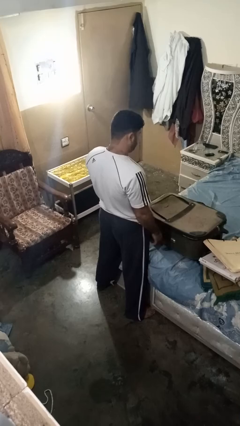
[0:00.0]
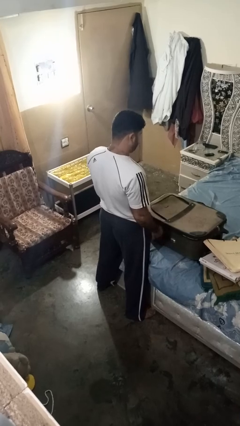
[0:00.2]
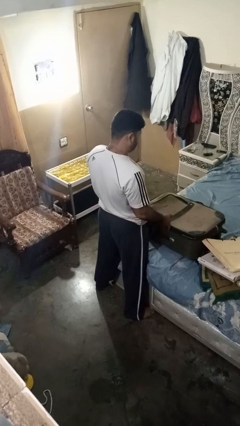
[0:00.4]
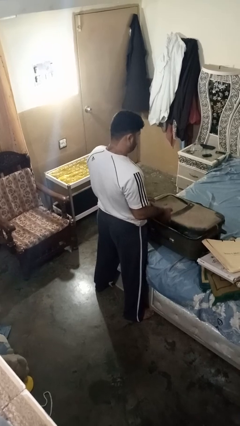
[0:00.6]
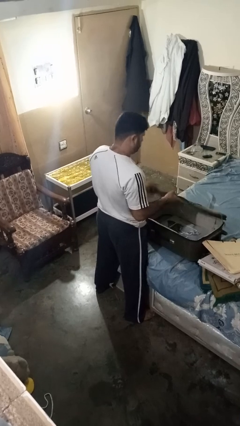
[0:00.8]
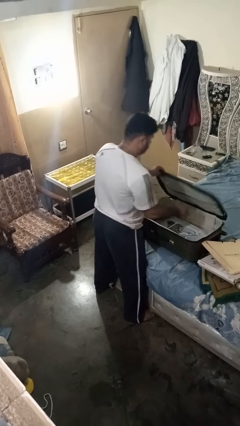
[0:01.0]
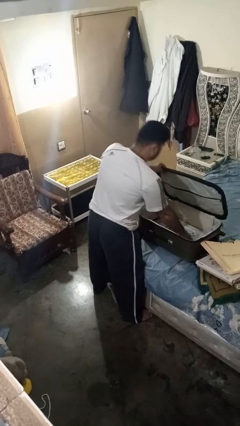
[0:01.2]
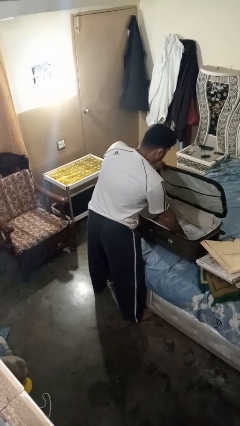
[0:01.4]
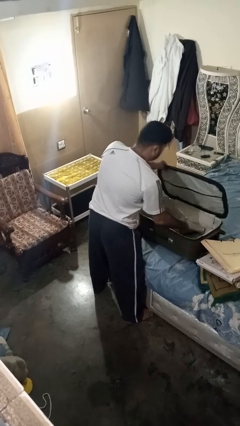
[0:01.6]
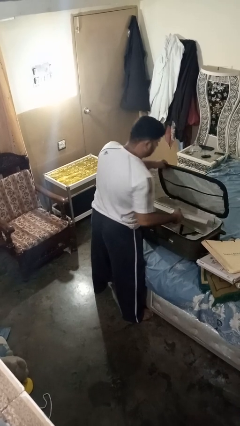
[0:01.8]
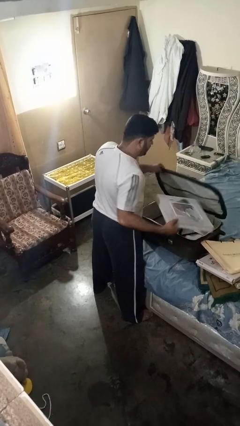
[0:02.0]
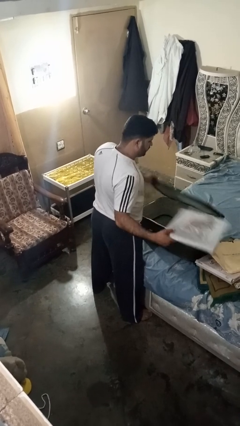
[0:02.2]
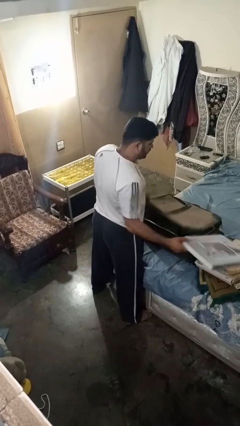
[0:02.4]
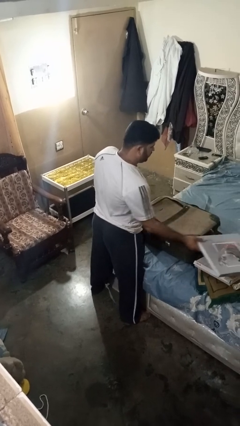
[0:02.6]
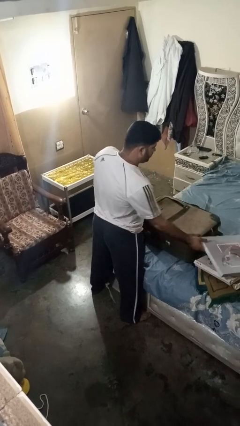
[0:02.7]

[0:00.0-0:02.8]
person unloads clothes from suitcase

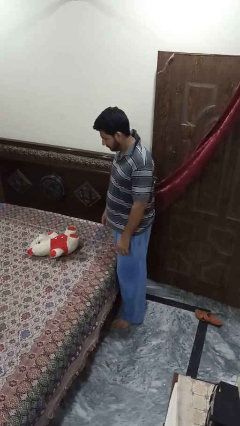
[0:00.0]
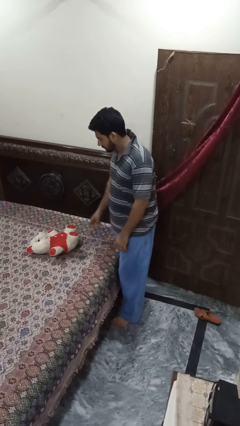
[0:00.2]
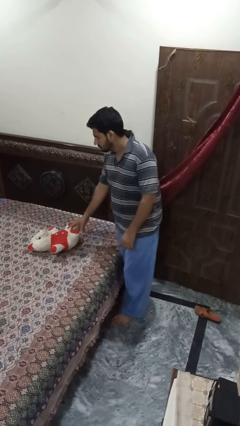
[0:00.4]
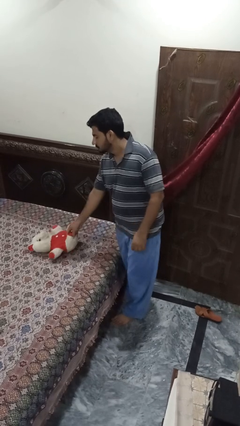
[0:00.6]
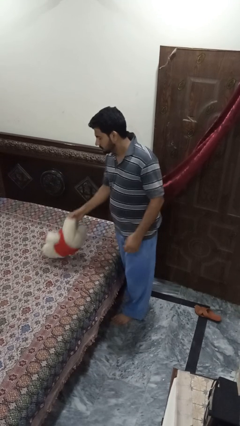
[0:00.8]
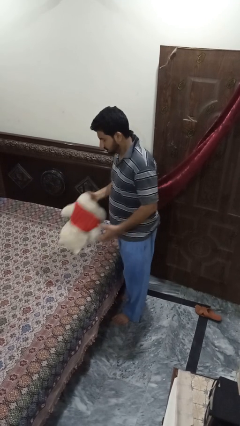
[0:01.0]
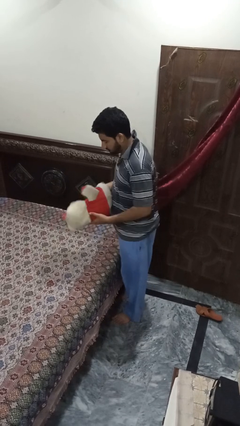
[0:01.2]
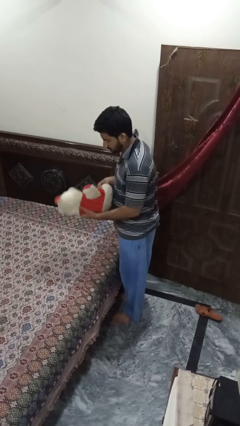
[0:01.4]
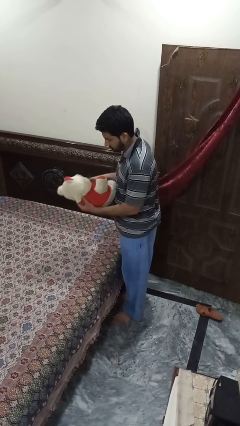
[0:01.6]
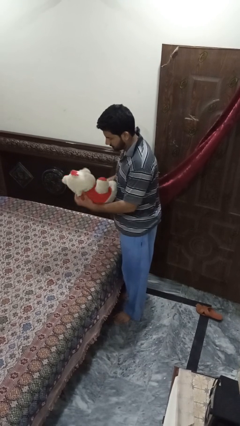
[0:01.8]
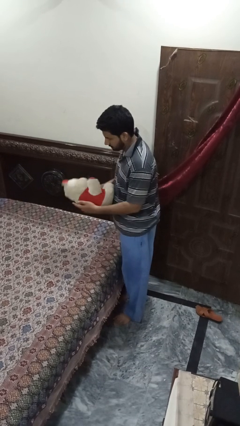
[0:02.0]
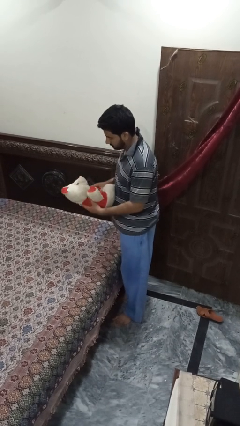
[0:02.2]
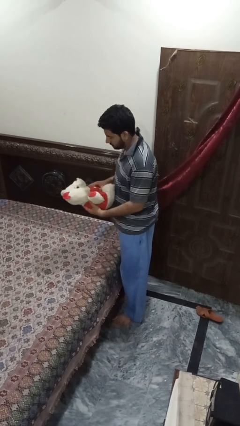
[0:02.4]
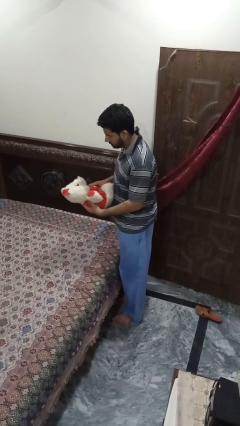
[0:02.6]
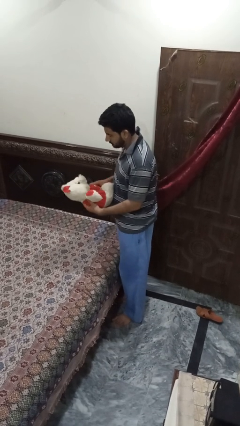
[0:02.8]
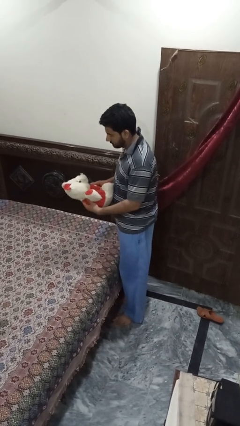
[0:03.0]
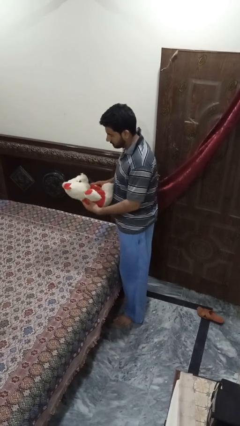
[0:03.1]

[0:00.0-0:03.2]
person picks up object from bed

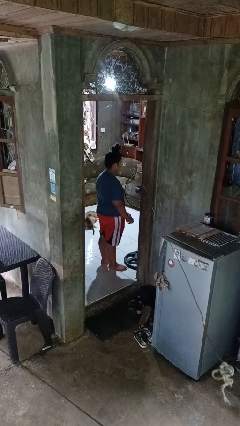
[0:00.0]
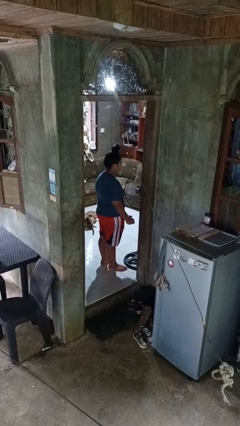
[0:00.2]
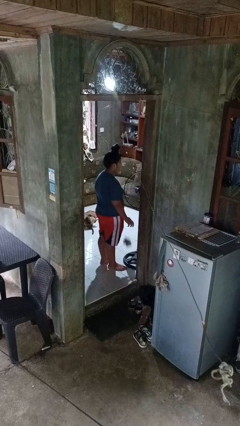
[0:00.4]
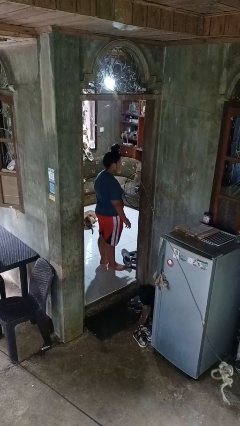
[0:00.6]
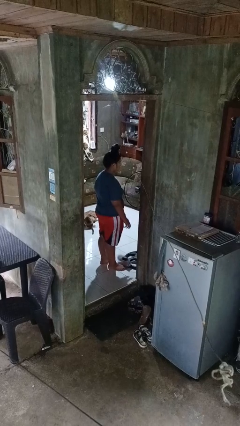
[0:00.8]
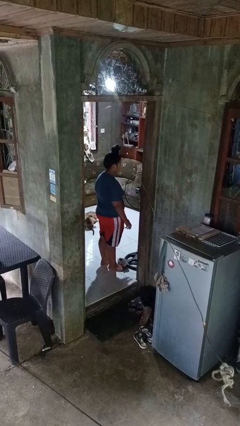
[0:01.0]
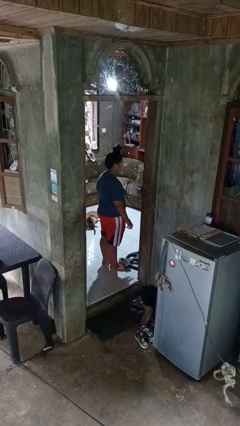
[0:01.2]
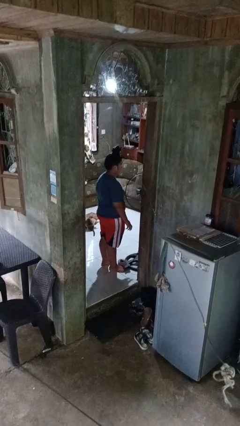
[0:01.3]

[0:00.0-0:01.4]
person drops object

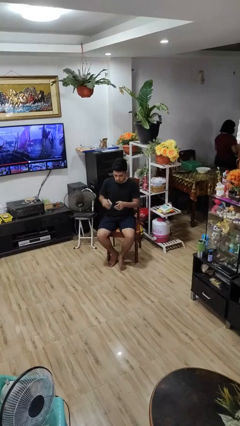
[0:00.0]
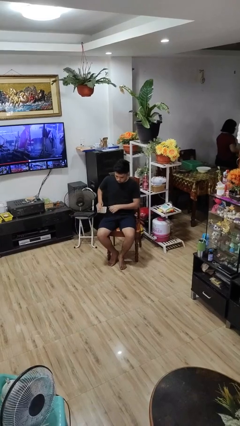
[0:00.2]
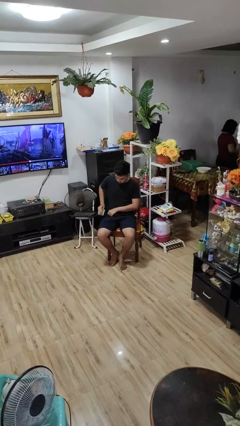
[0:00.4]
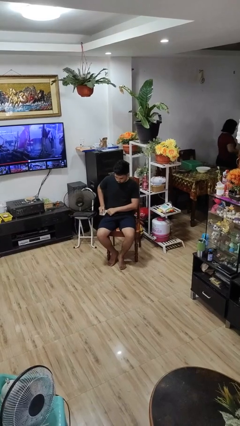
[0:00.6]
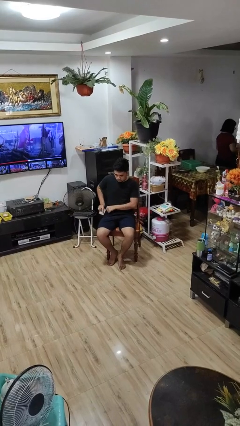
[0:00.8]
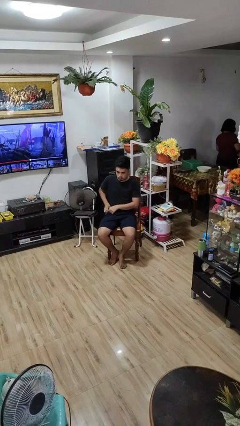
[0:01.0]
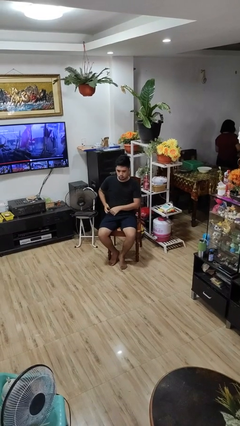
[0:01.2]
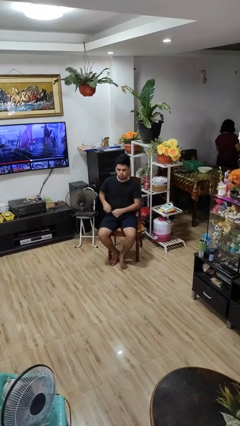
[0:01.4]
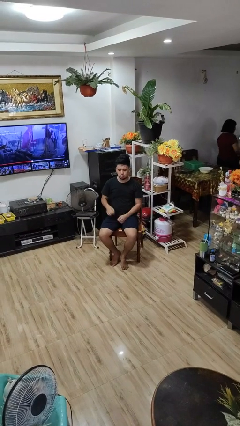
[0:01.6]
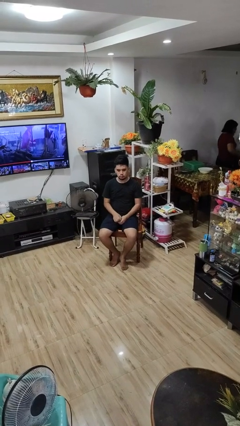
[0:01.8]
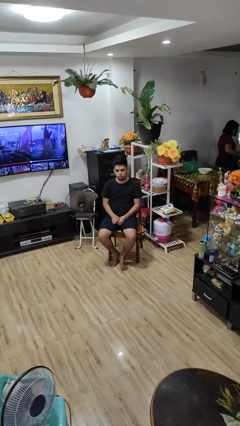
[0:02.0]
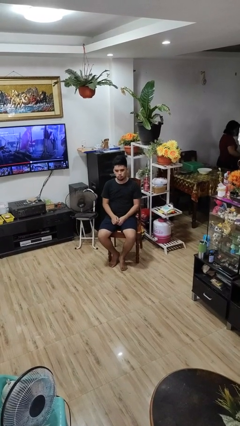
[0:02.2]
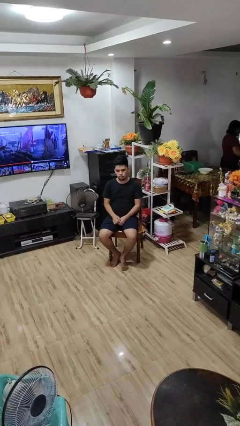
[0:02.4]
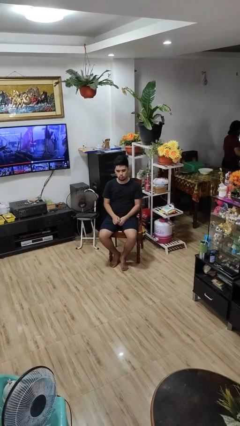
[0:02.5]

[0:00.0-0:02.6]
person puts phone into pocket

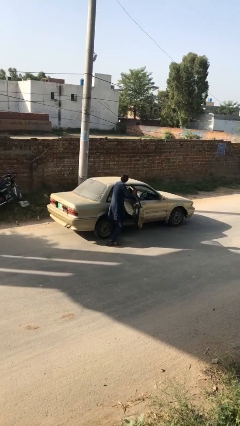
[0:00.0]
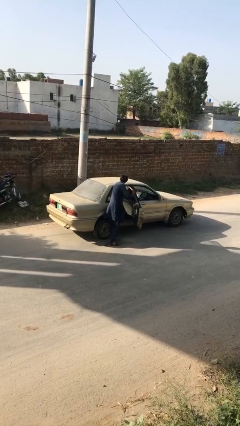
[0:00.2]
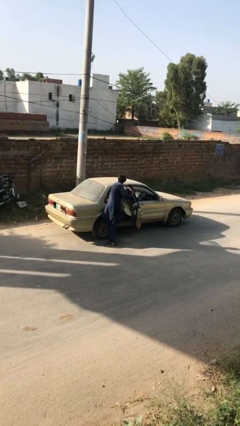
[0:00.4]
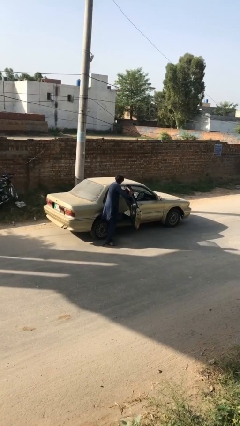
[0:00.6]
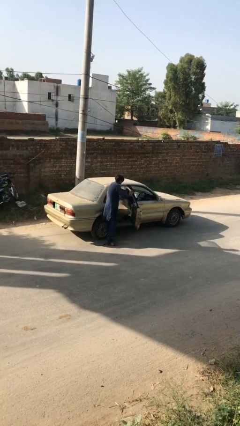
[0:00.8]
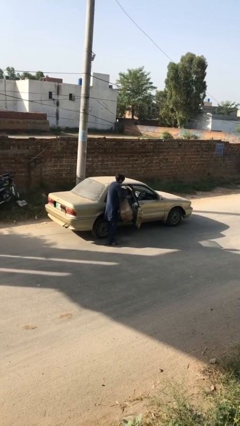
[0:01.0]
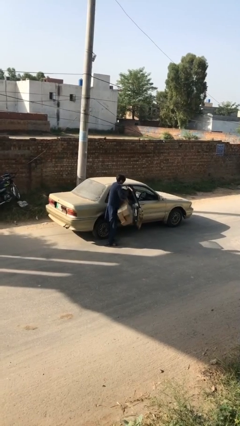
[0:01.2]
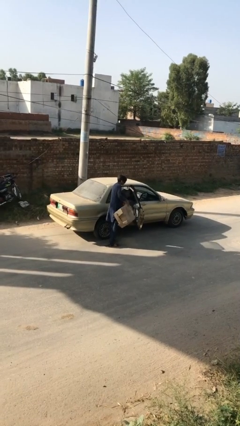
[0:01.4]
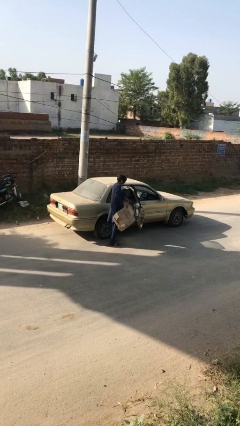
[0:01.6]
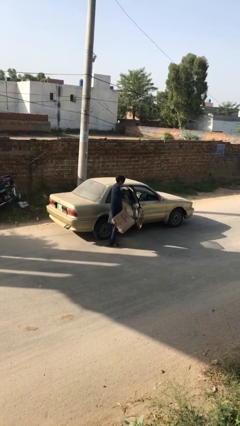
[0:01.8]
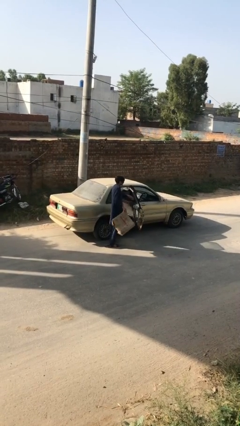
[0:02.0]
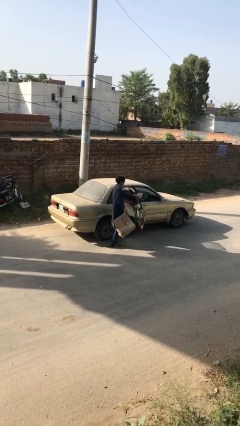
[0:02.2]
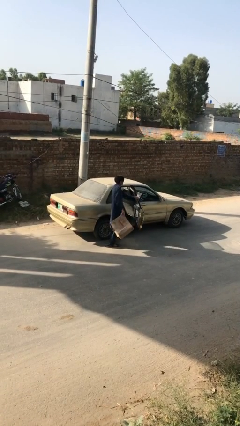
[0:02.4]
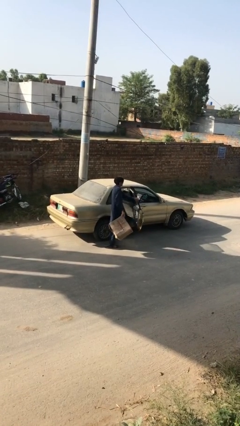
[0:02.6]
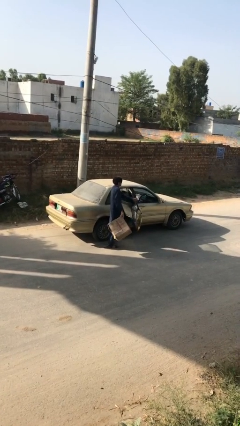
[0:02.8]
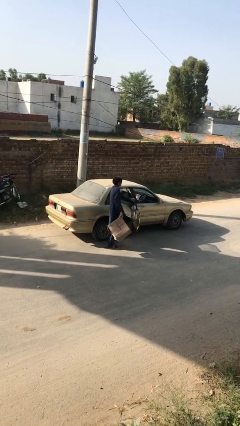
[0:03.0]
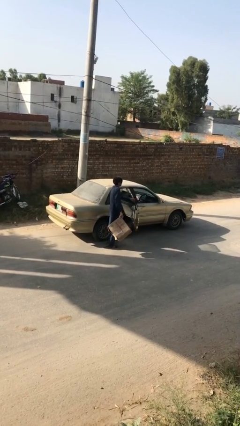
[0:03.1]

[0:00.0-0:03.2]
person unloads car

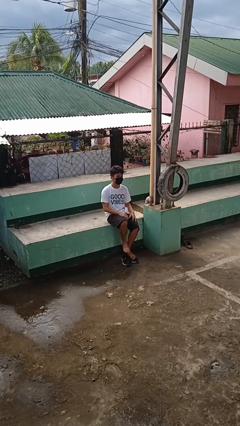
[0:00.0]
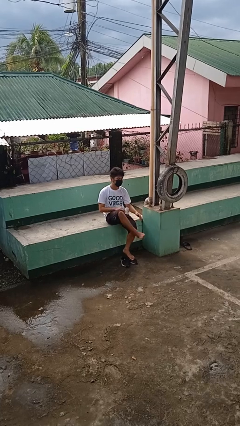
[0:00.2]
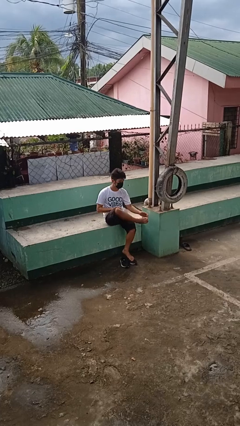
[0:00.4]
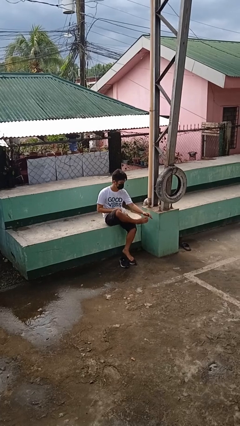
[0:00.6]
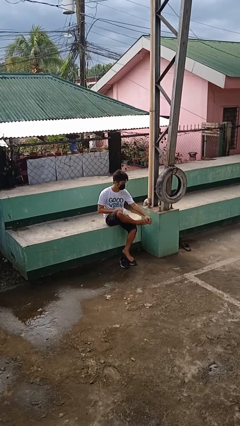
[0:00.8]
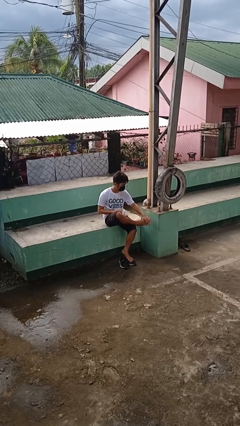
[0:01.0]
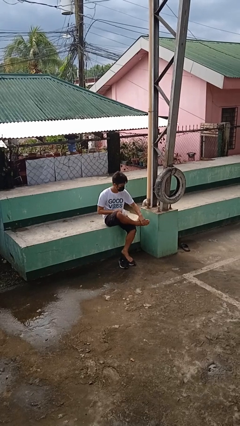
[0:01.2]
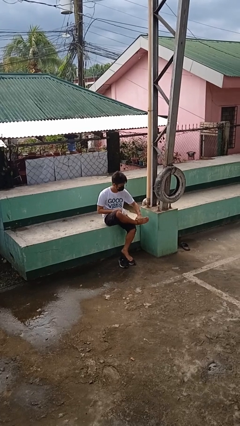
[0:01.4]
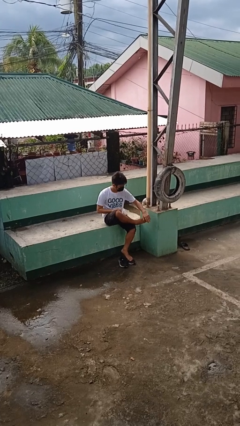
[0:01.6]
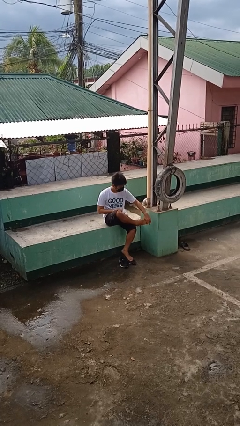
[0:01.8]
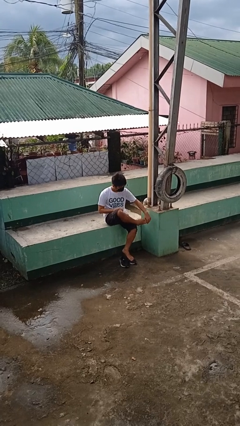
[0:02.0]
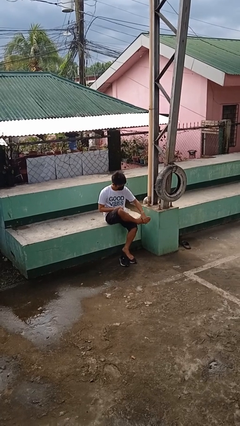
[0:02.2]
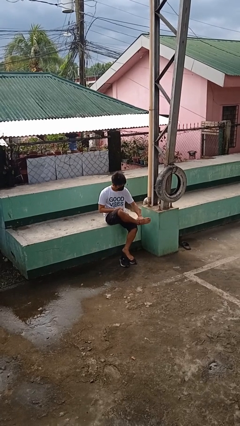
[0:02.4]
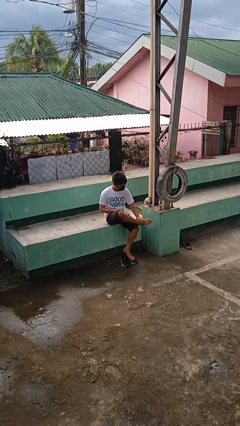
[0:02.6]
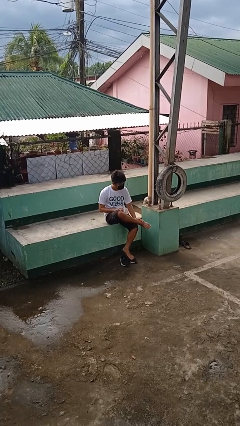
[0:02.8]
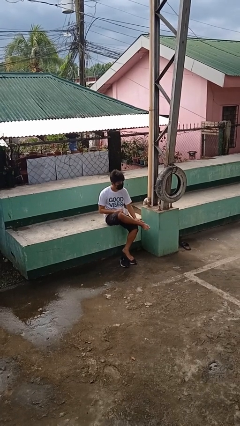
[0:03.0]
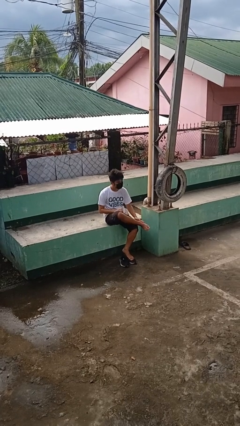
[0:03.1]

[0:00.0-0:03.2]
person rubs foot

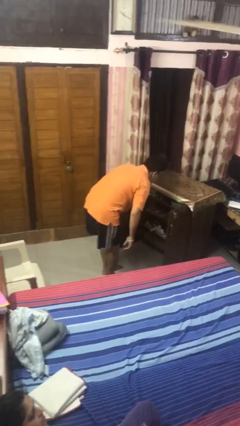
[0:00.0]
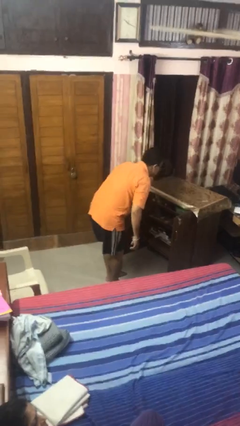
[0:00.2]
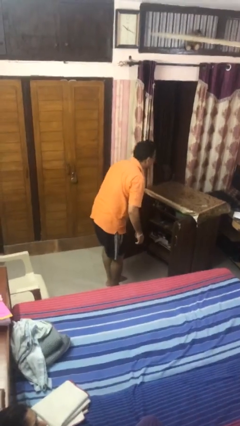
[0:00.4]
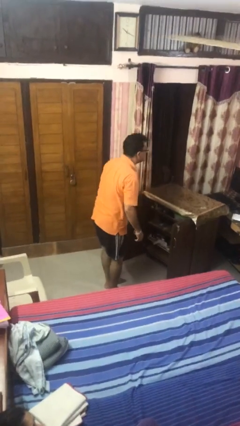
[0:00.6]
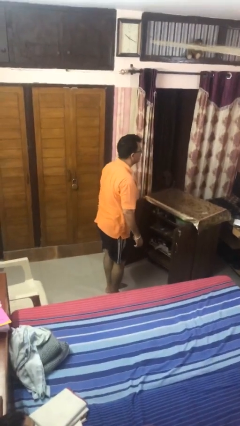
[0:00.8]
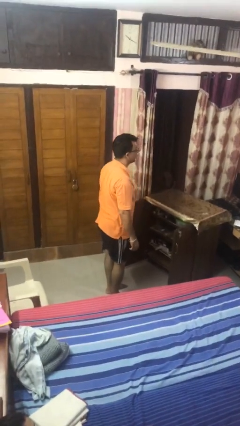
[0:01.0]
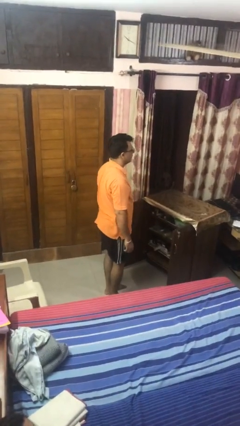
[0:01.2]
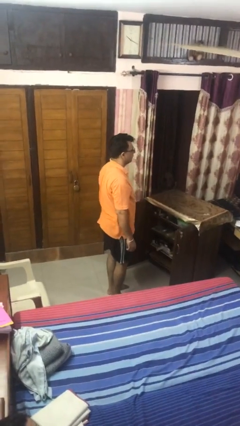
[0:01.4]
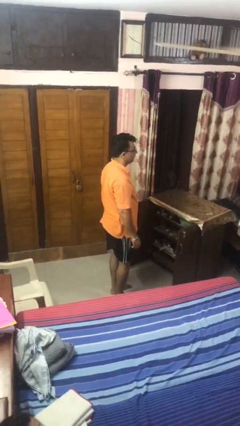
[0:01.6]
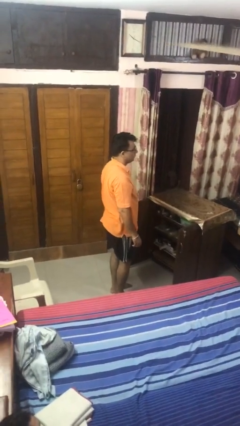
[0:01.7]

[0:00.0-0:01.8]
person searches in cabinet
